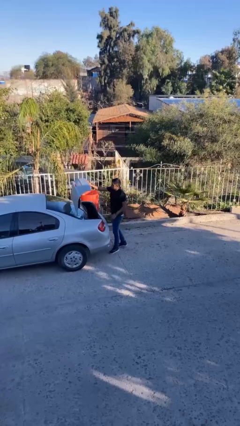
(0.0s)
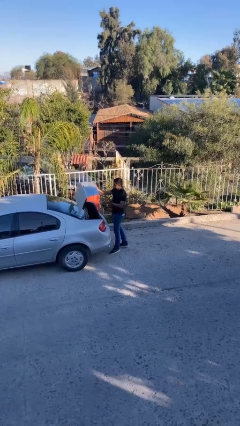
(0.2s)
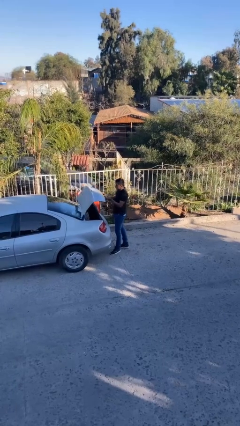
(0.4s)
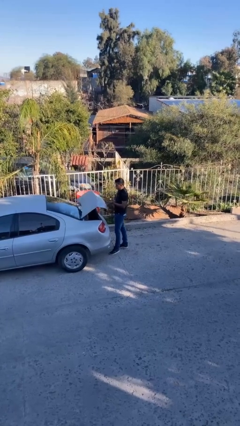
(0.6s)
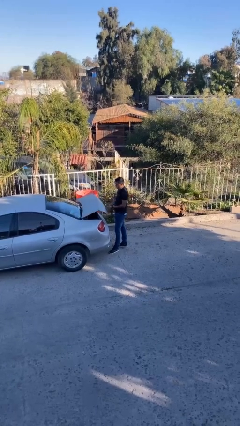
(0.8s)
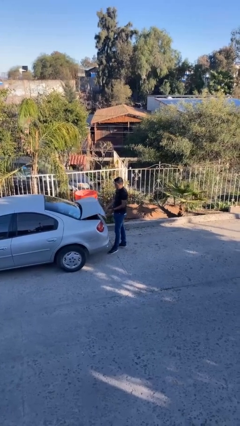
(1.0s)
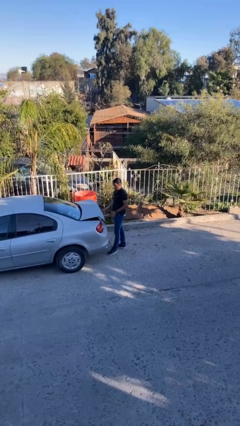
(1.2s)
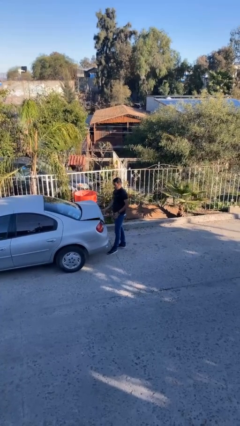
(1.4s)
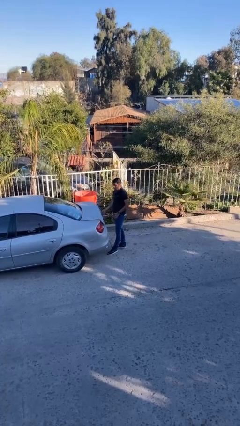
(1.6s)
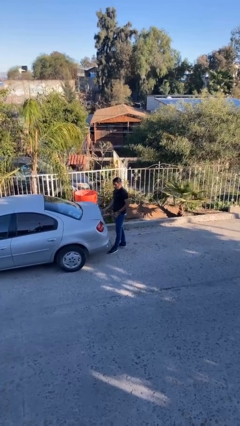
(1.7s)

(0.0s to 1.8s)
person closes car trunk

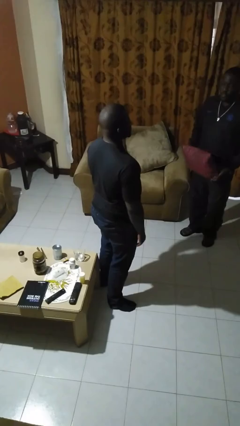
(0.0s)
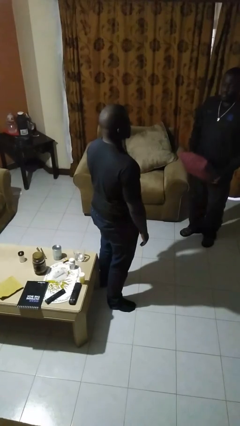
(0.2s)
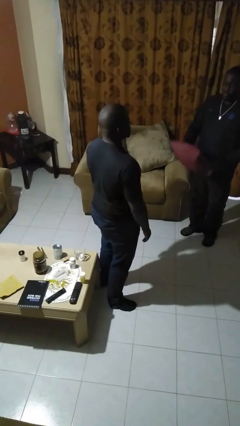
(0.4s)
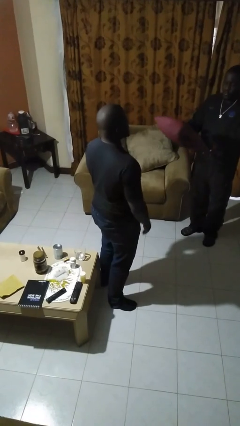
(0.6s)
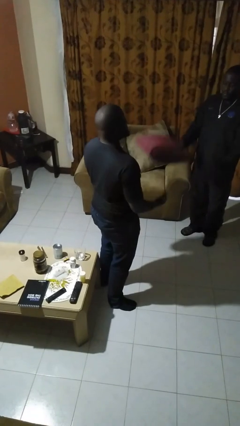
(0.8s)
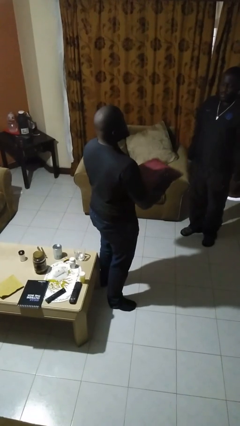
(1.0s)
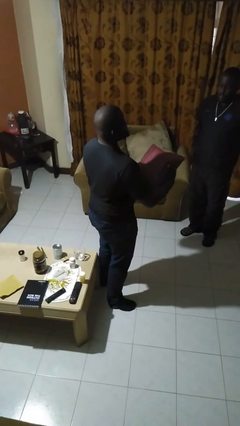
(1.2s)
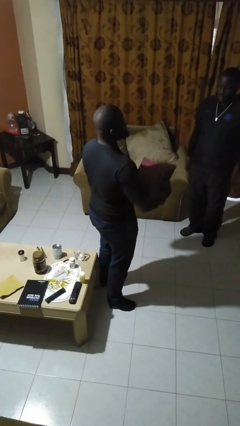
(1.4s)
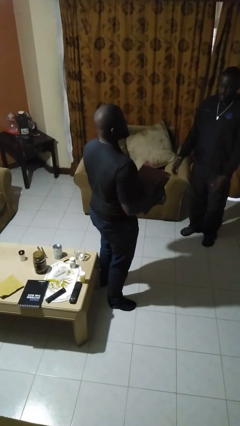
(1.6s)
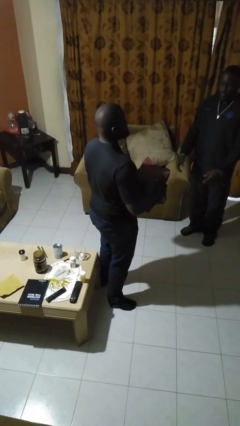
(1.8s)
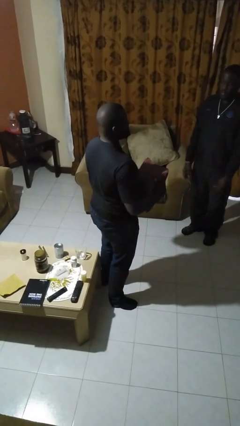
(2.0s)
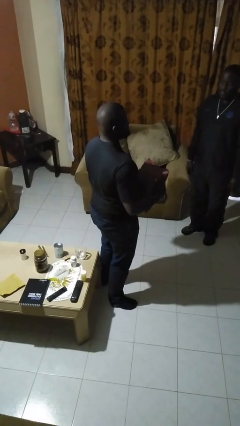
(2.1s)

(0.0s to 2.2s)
person catches object from person

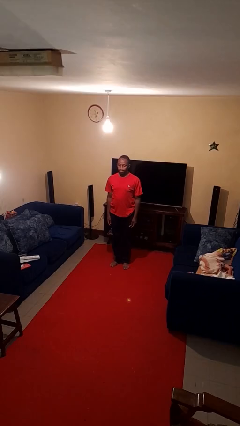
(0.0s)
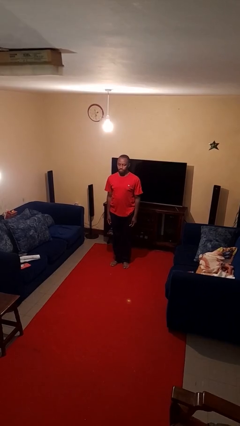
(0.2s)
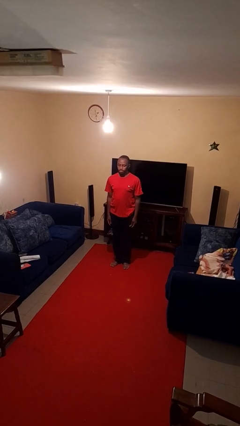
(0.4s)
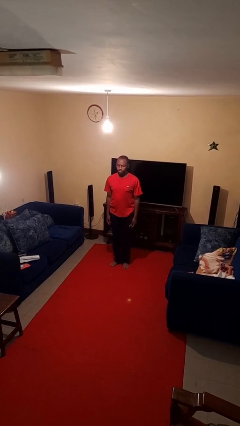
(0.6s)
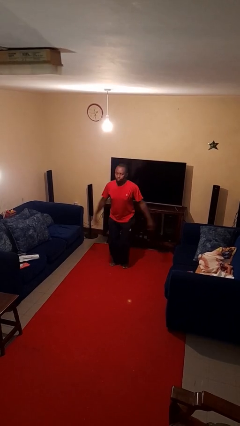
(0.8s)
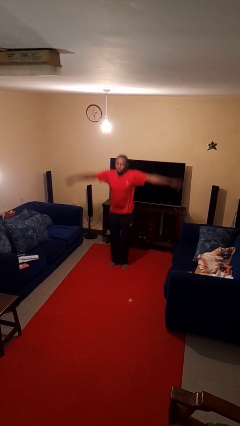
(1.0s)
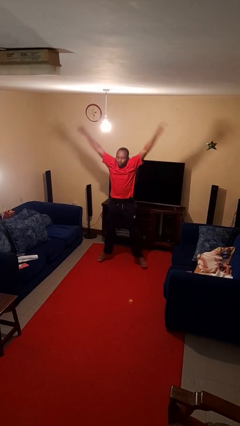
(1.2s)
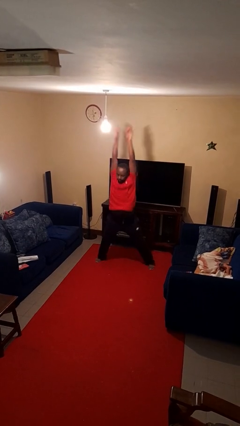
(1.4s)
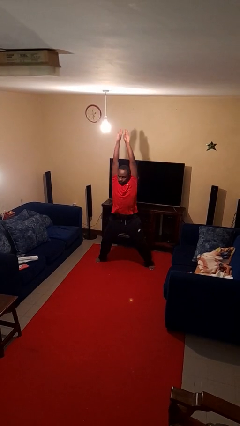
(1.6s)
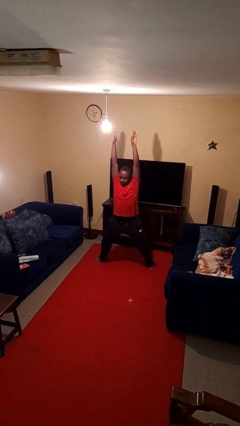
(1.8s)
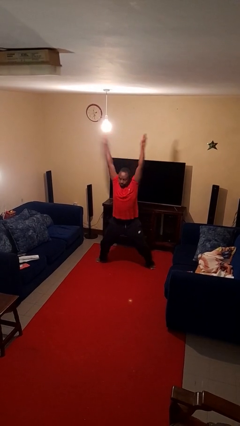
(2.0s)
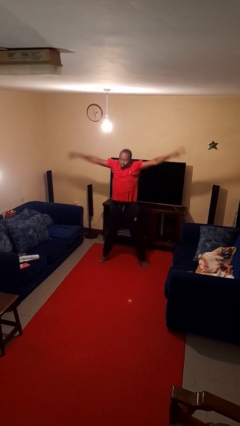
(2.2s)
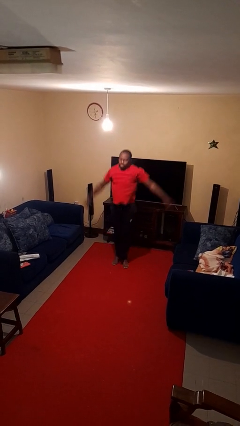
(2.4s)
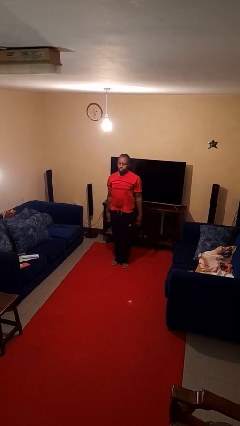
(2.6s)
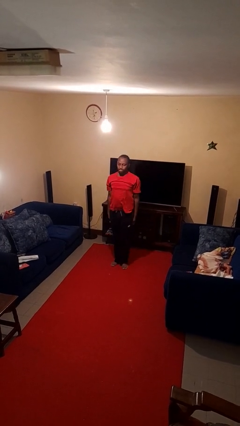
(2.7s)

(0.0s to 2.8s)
person exercises with jumping jacks

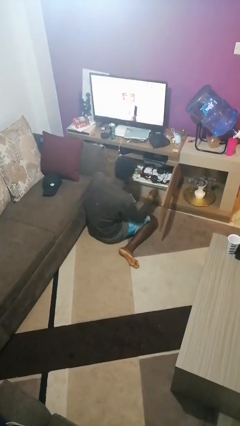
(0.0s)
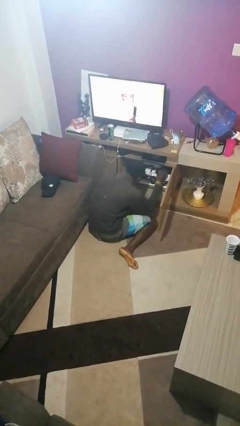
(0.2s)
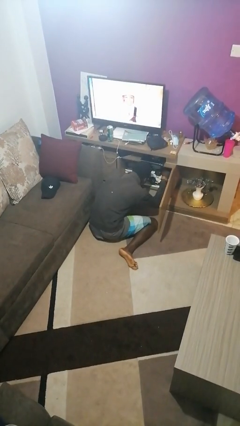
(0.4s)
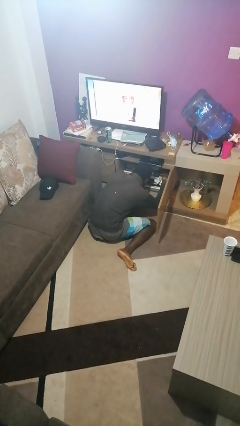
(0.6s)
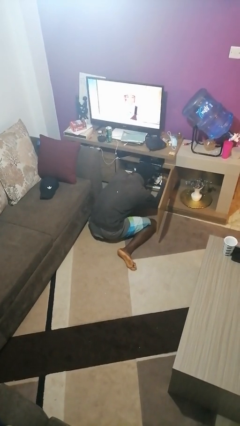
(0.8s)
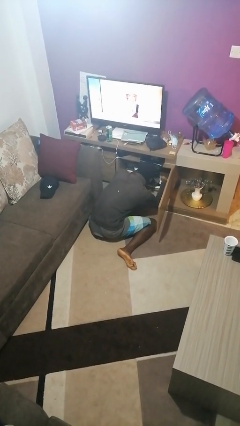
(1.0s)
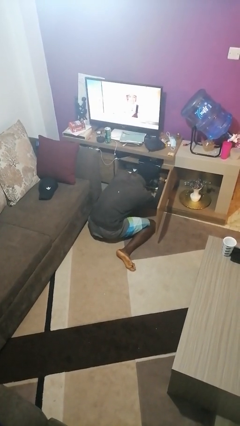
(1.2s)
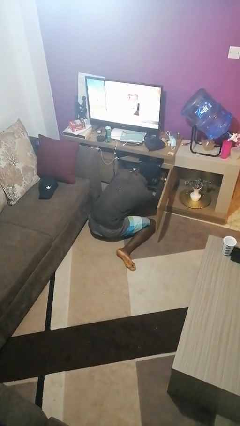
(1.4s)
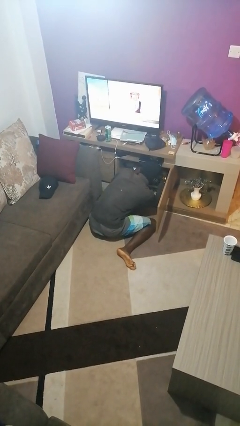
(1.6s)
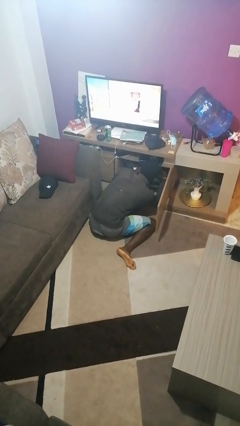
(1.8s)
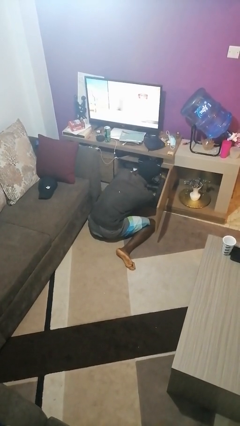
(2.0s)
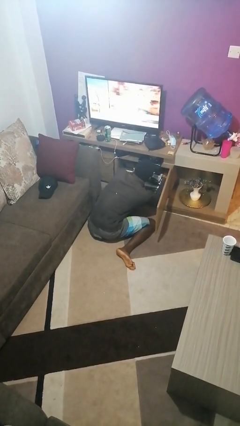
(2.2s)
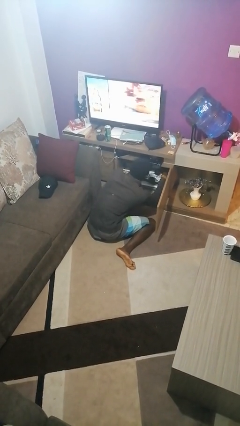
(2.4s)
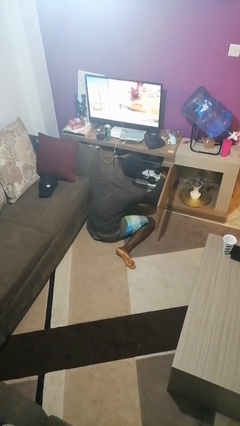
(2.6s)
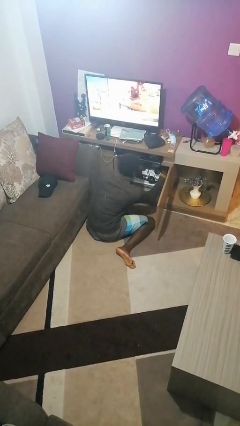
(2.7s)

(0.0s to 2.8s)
person searches in cabinet

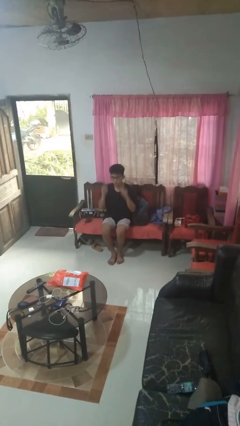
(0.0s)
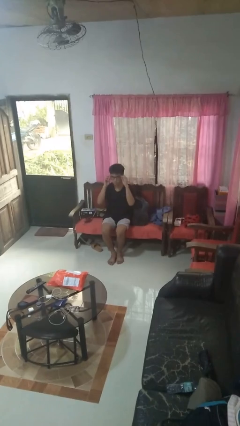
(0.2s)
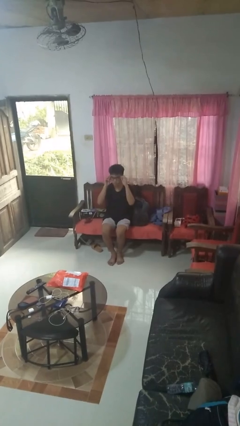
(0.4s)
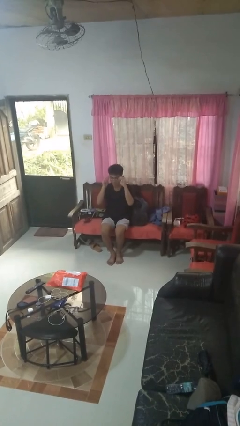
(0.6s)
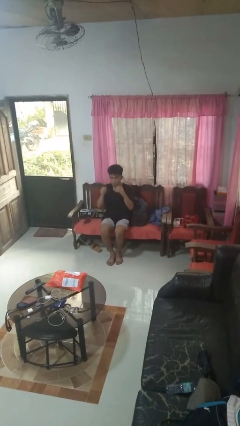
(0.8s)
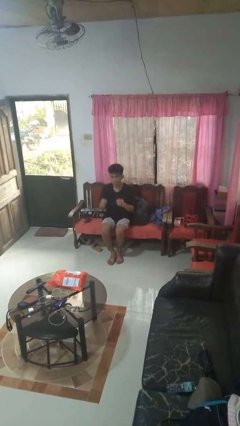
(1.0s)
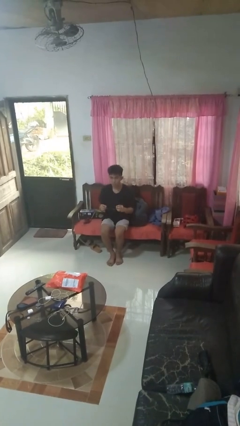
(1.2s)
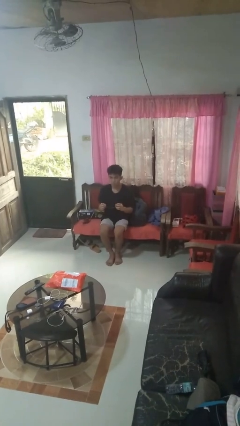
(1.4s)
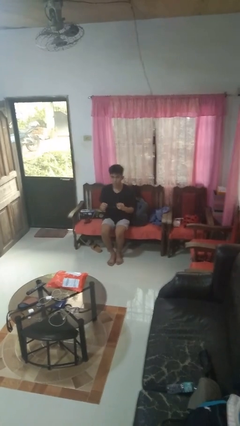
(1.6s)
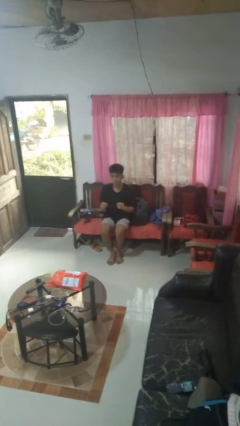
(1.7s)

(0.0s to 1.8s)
person takes off glasses

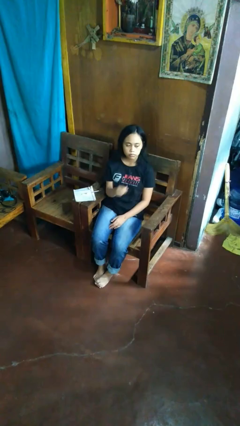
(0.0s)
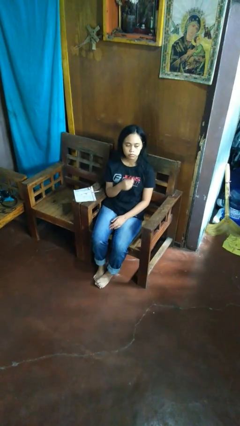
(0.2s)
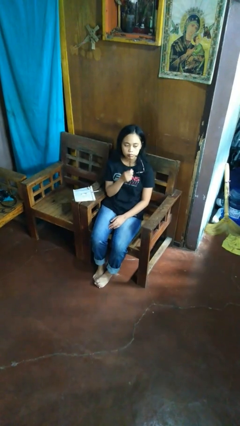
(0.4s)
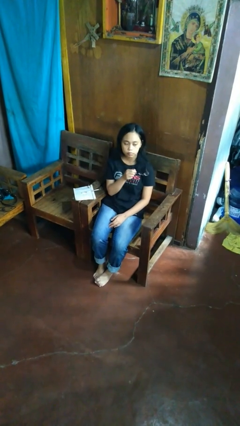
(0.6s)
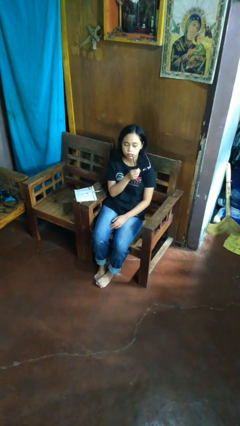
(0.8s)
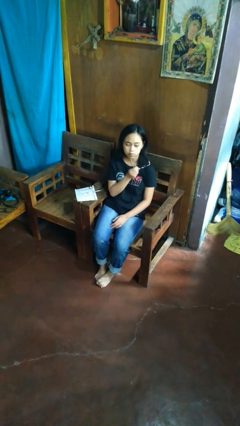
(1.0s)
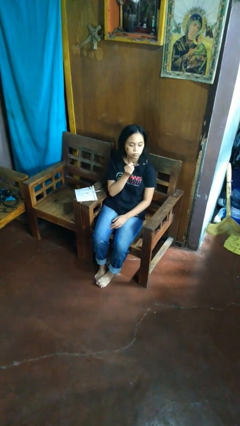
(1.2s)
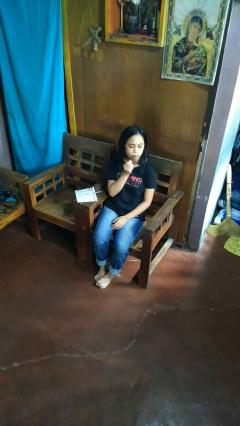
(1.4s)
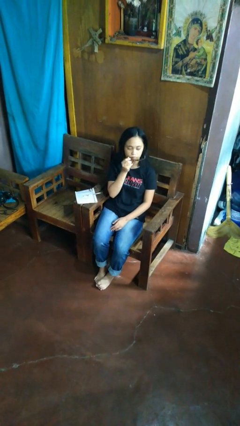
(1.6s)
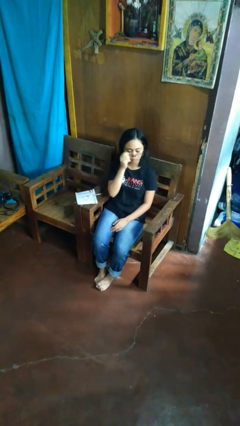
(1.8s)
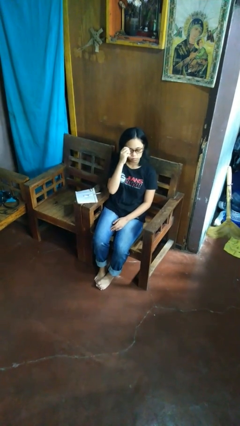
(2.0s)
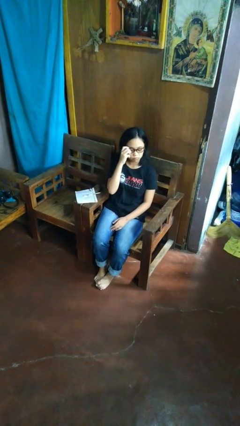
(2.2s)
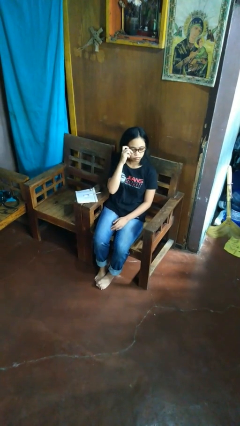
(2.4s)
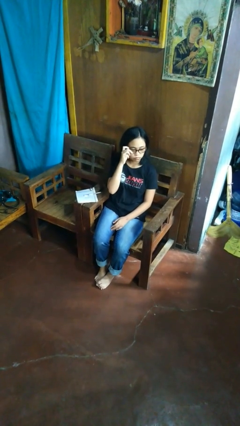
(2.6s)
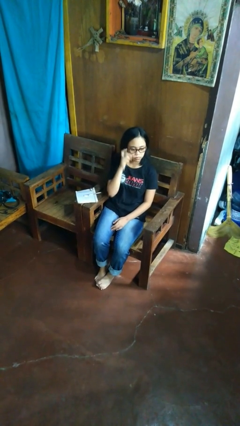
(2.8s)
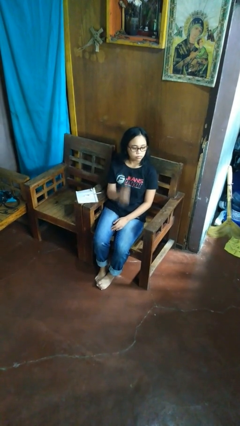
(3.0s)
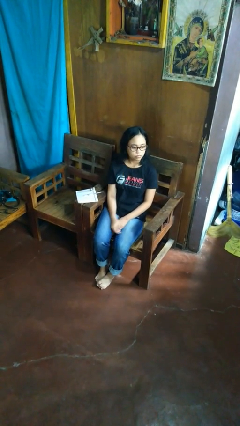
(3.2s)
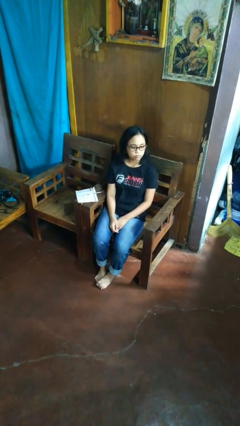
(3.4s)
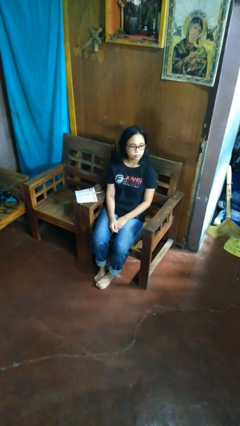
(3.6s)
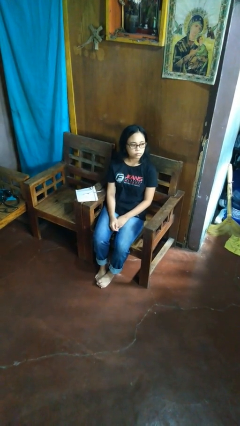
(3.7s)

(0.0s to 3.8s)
person puts on glasses

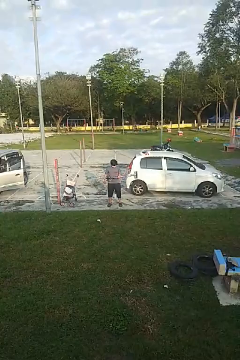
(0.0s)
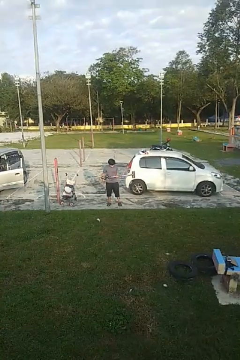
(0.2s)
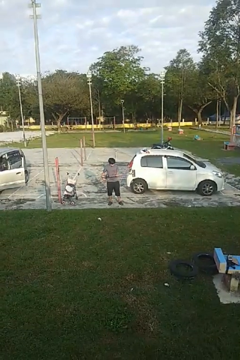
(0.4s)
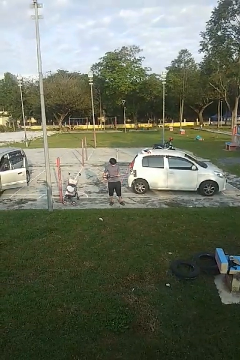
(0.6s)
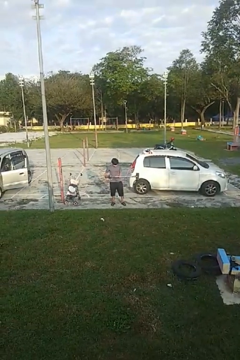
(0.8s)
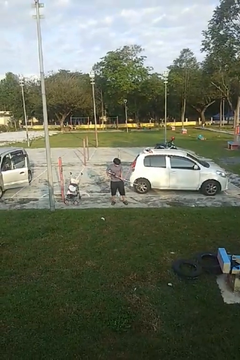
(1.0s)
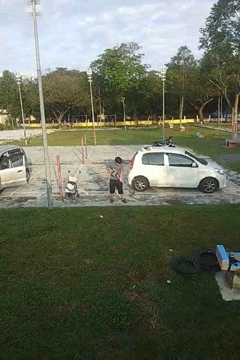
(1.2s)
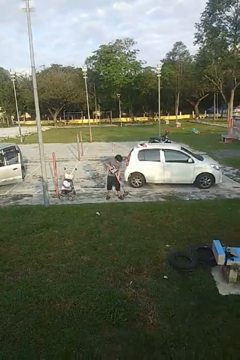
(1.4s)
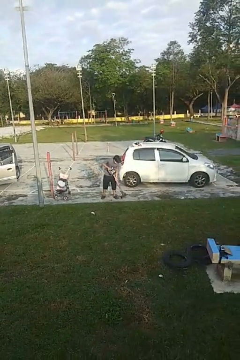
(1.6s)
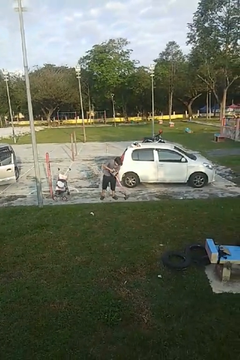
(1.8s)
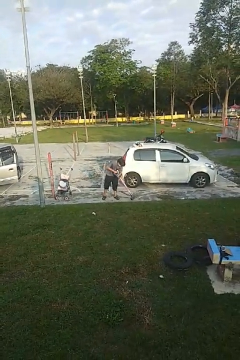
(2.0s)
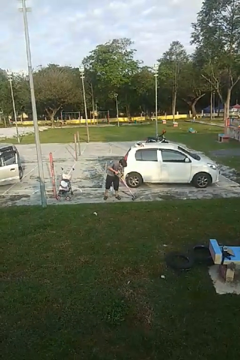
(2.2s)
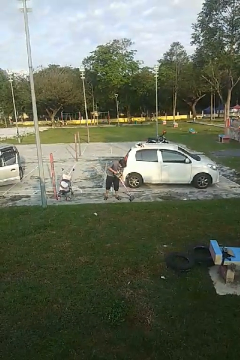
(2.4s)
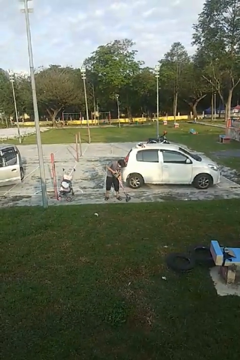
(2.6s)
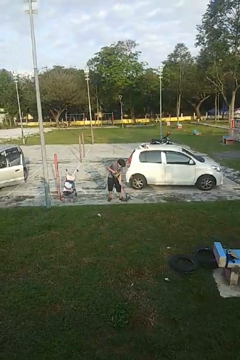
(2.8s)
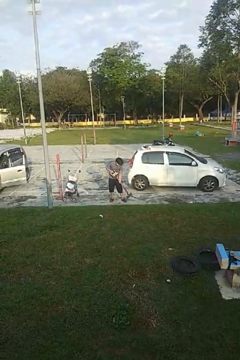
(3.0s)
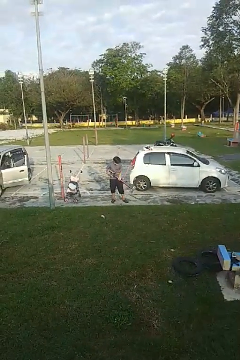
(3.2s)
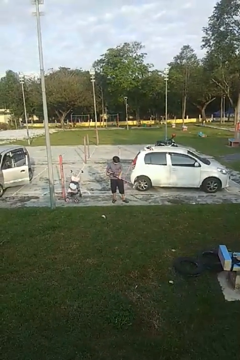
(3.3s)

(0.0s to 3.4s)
person vacuums carpet
